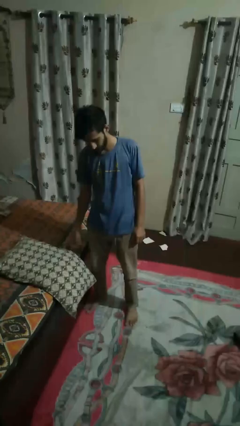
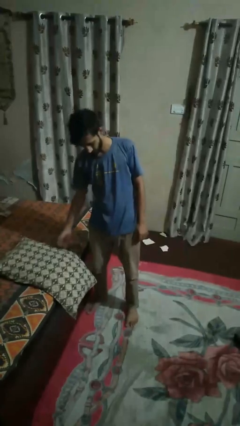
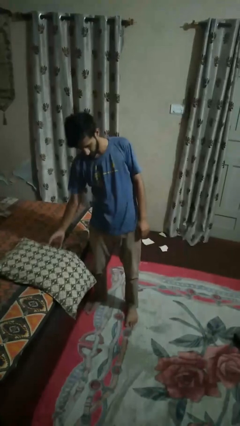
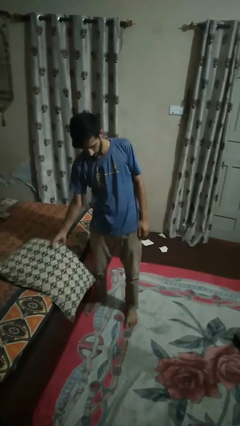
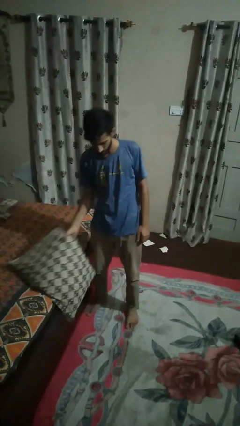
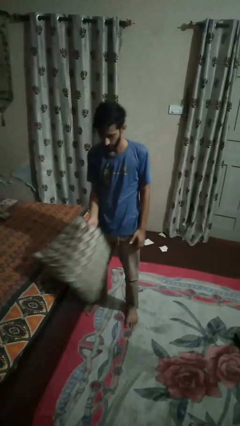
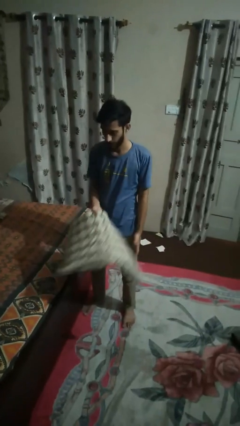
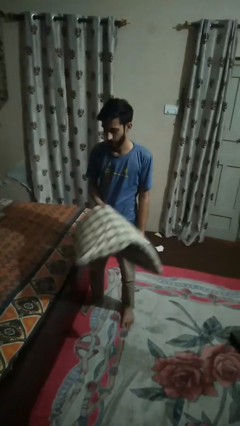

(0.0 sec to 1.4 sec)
person picks up object from bed

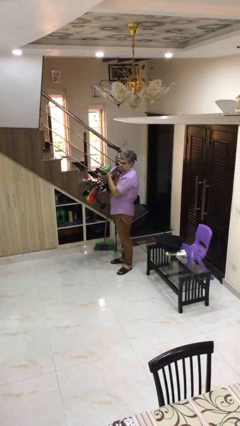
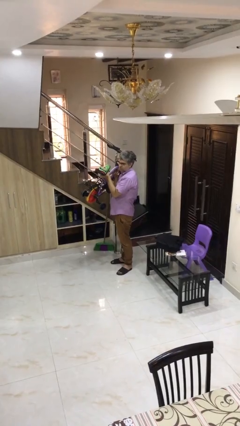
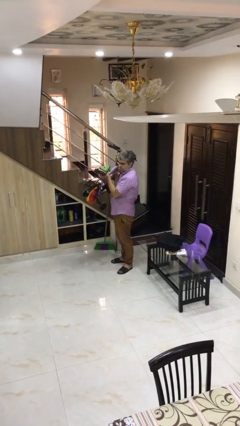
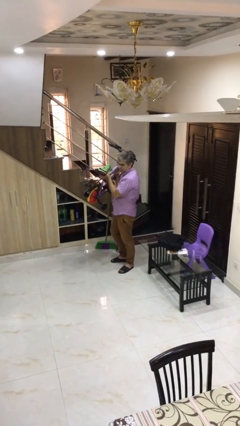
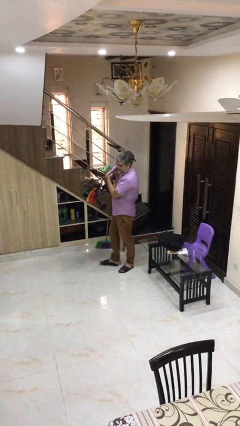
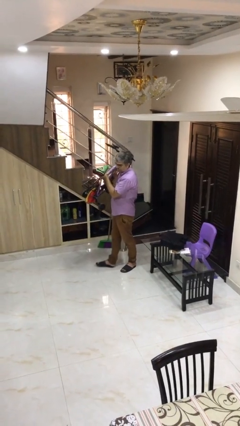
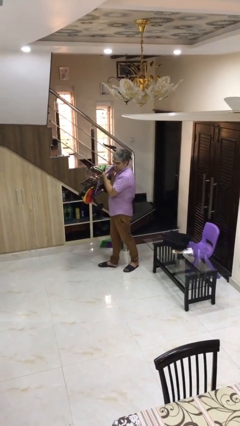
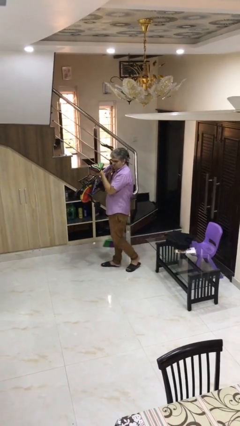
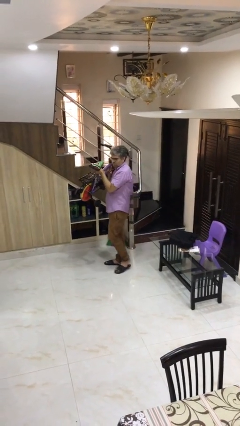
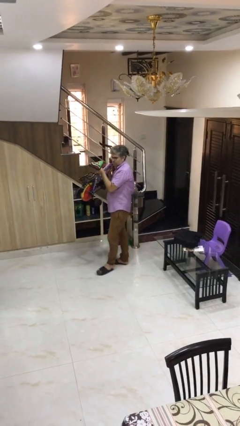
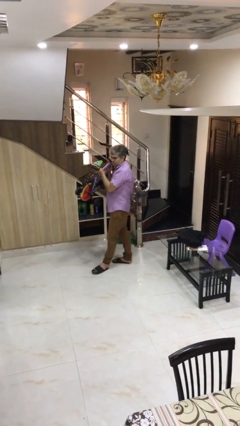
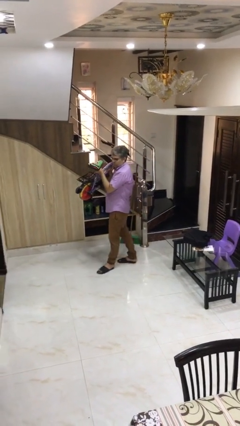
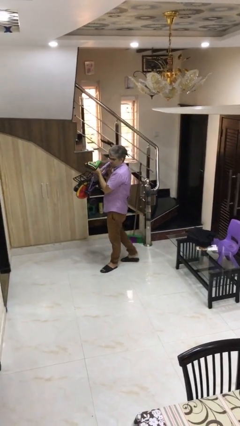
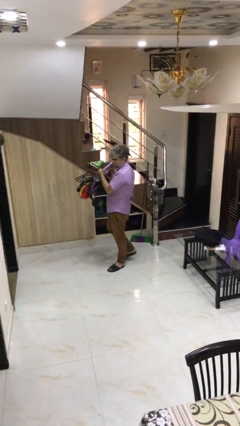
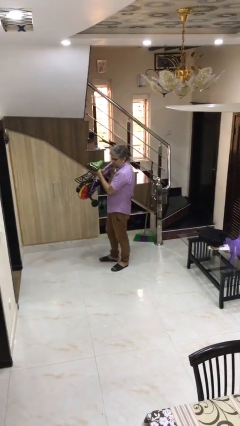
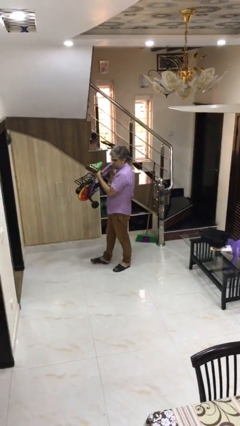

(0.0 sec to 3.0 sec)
person carries heavy object

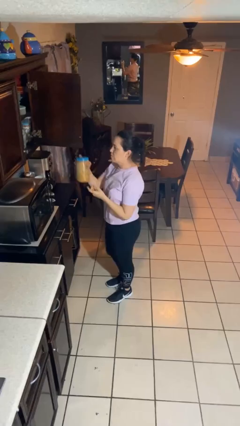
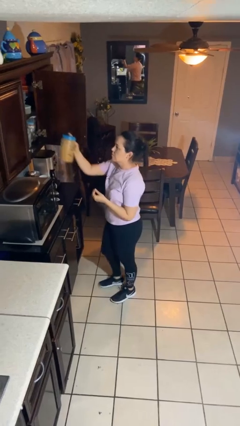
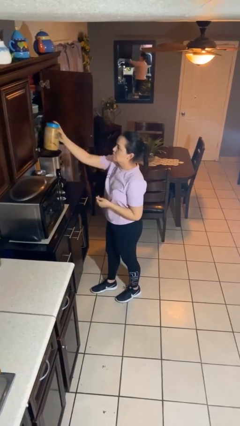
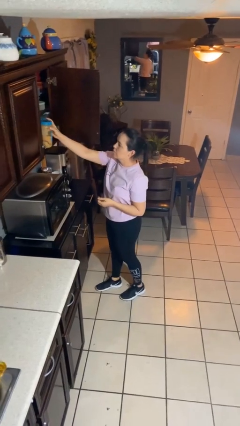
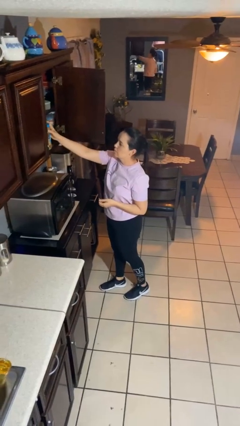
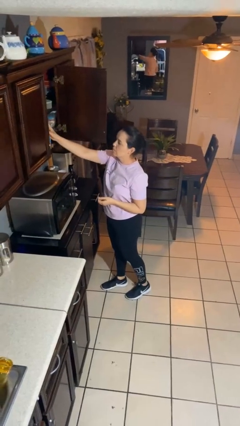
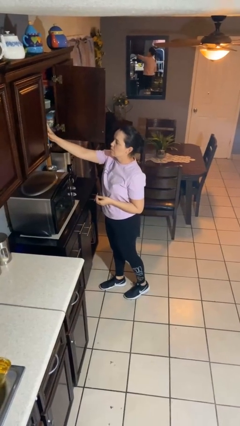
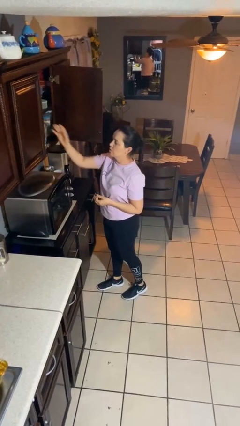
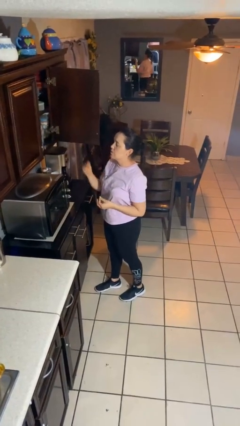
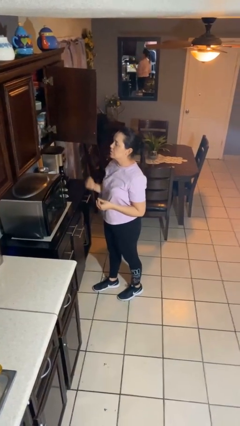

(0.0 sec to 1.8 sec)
person puts down object into cabinet

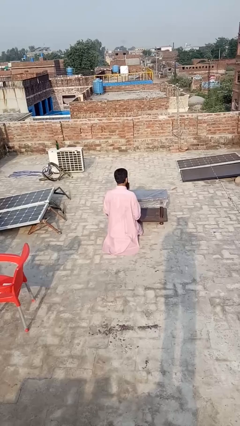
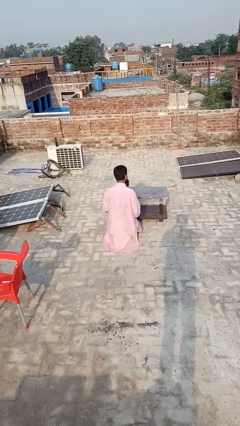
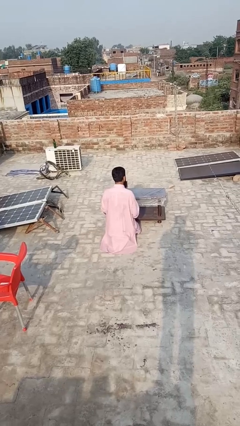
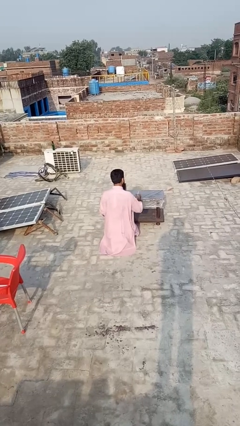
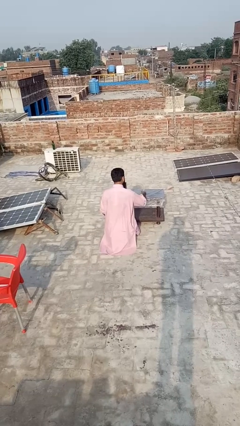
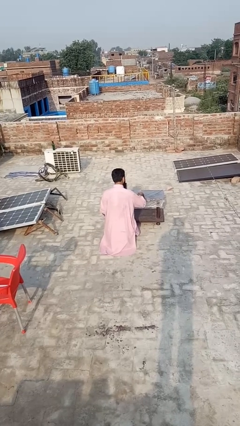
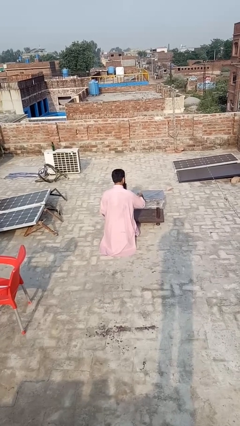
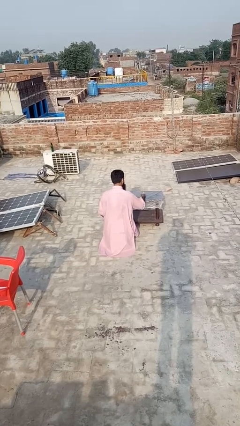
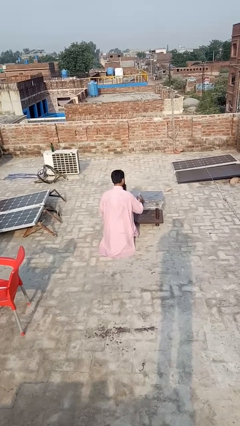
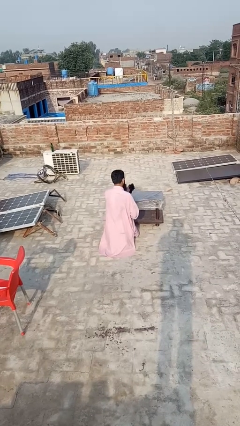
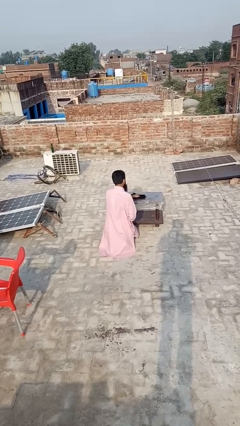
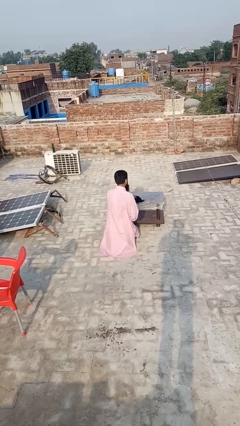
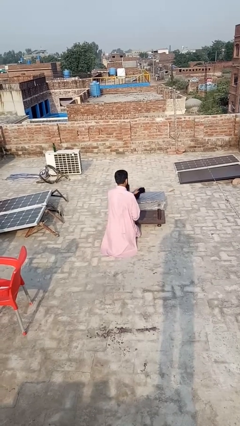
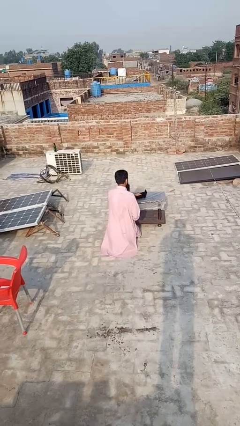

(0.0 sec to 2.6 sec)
person sprays from bottle

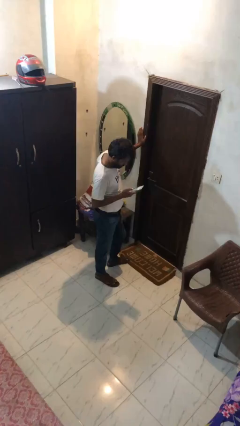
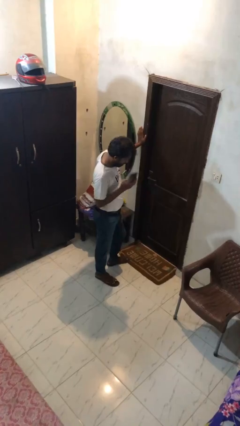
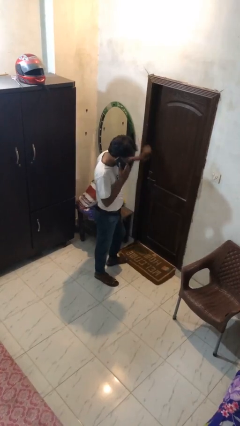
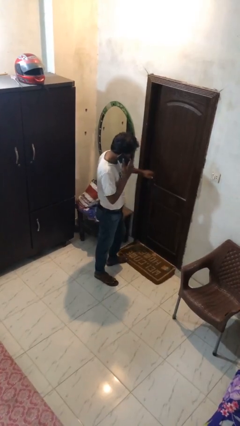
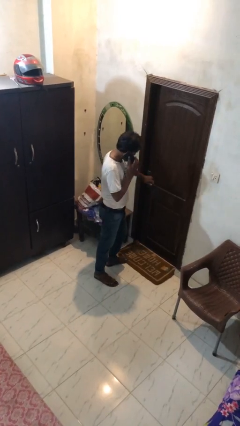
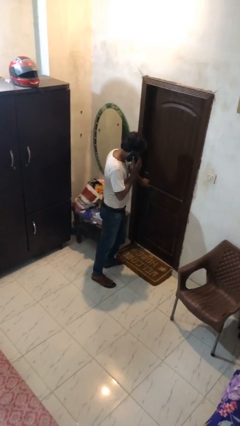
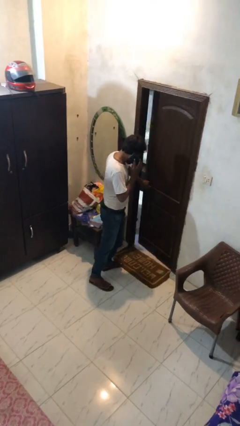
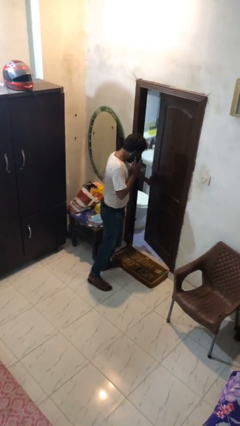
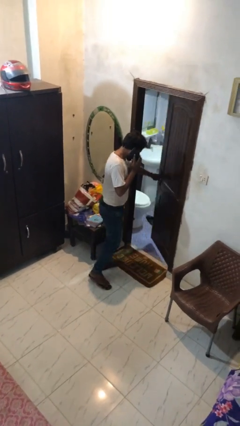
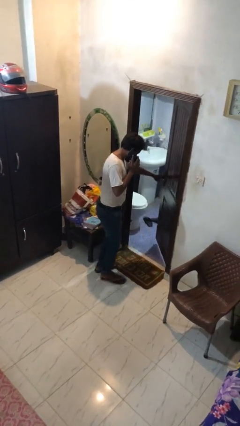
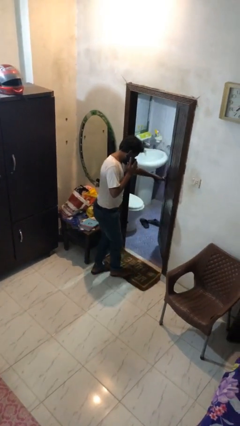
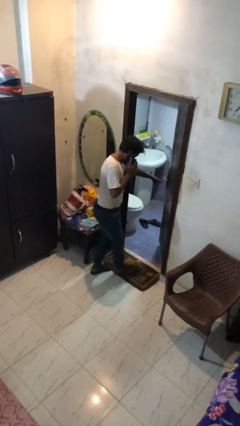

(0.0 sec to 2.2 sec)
person opens facility door

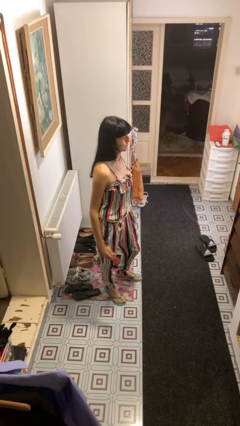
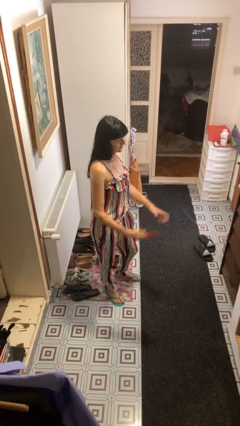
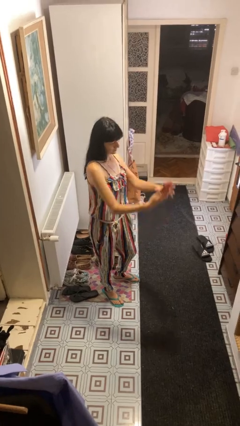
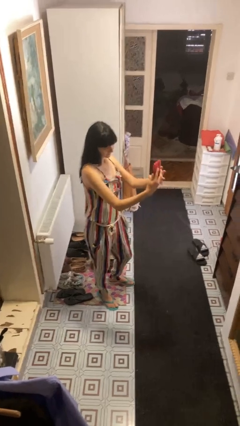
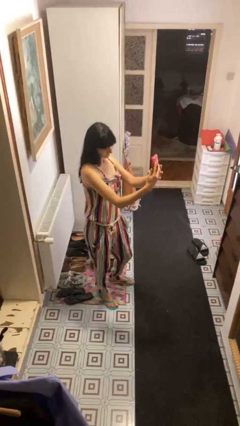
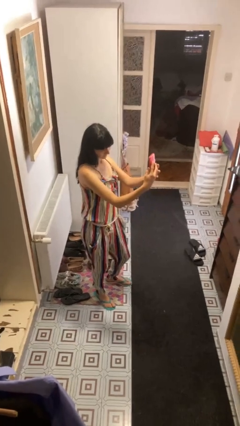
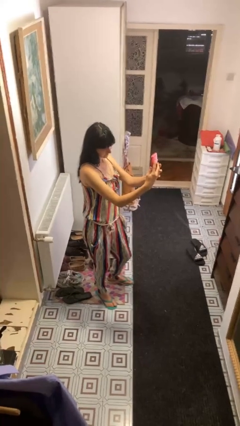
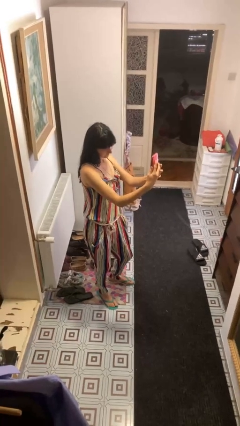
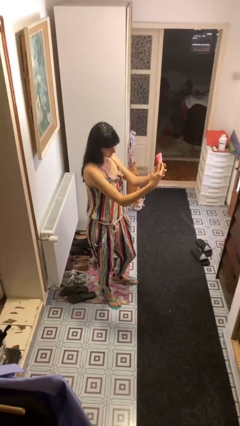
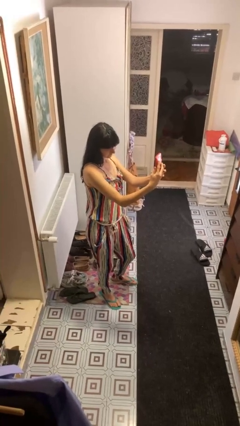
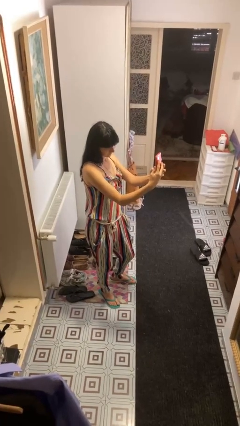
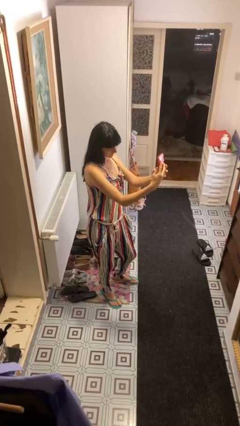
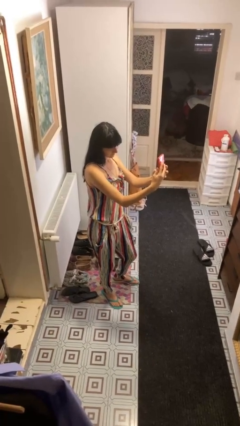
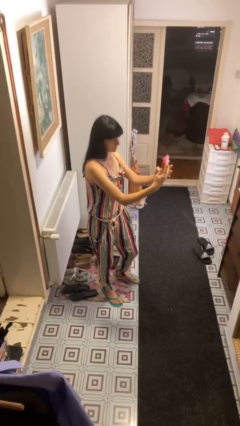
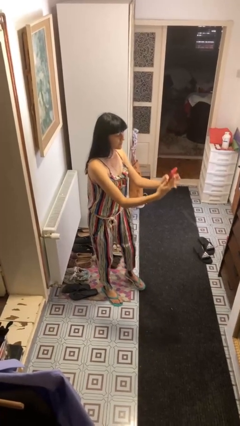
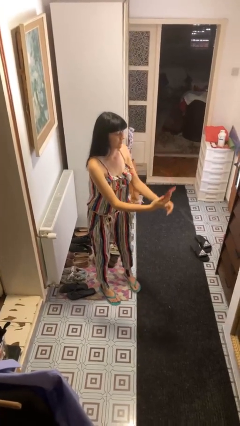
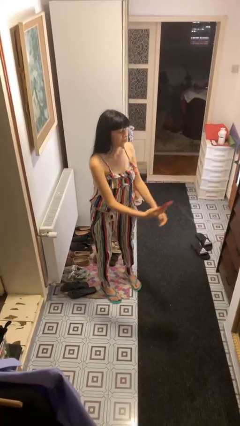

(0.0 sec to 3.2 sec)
person takes selfie

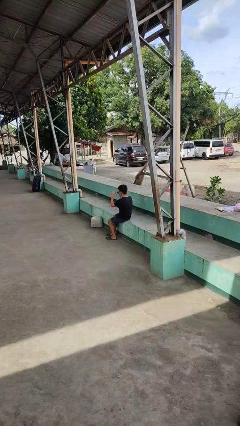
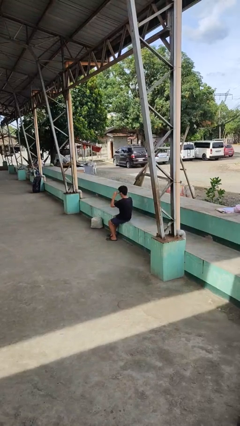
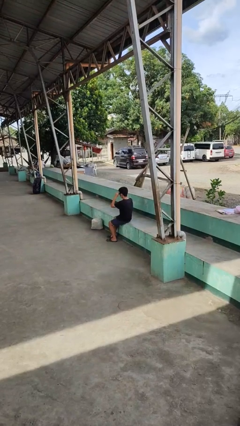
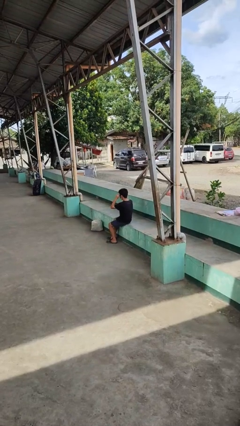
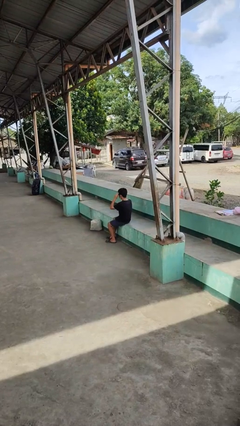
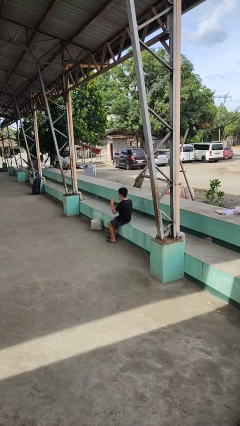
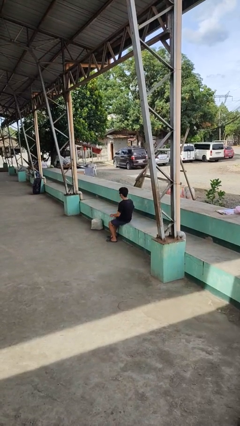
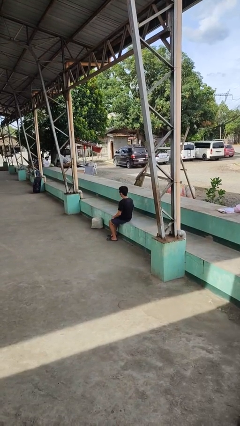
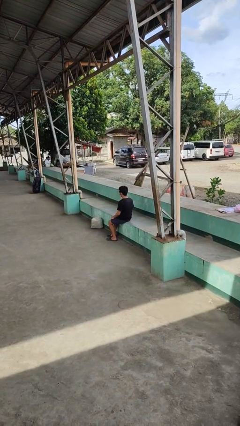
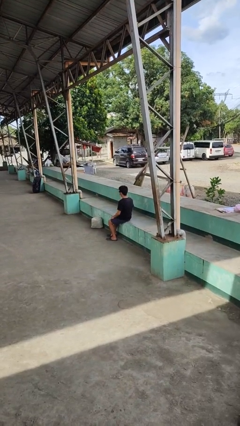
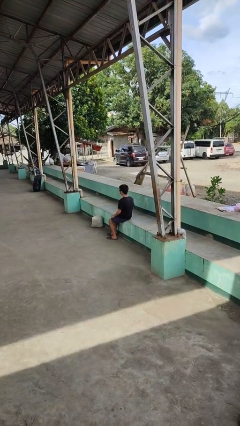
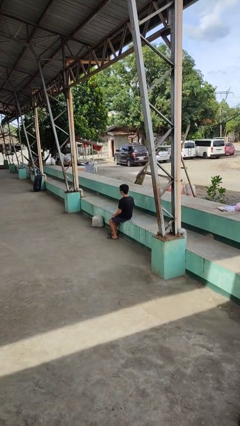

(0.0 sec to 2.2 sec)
person puts on sunglasses

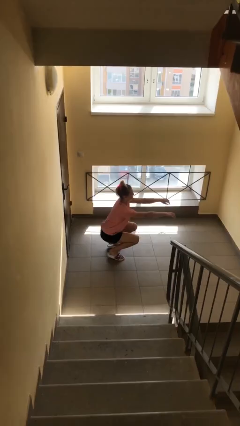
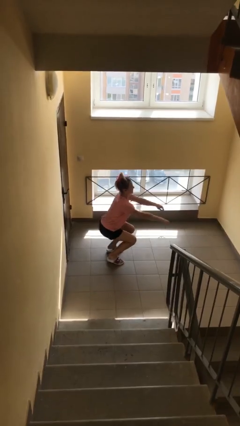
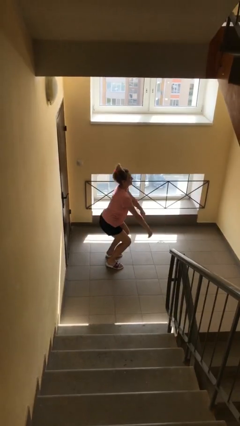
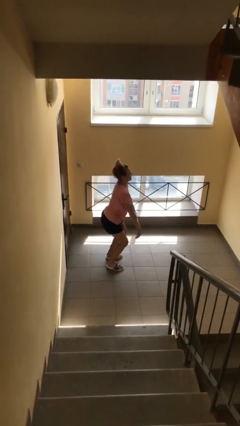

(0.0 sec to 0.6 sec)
person stands up
